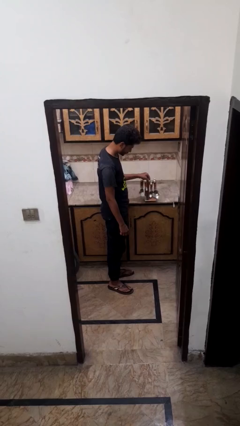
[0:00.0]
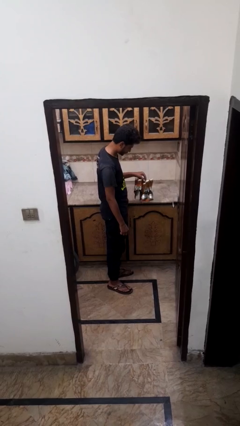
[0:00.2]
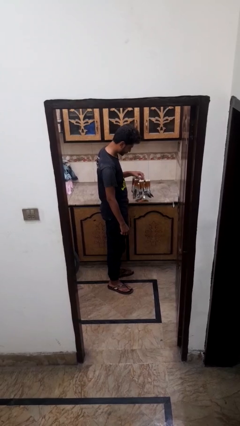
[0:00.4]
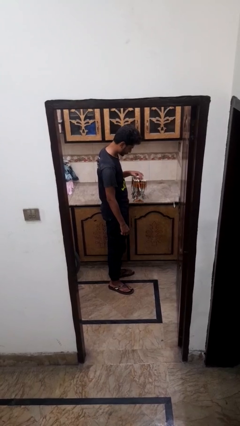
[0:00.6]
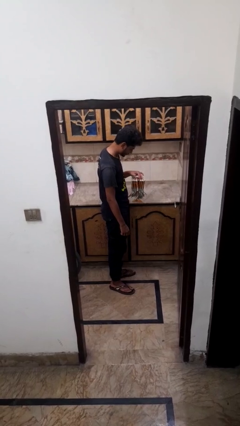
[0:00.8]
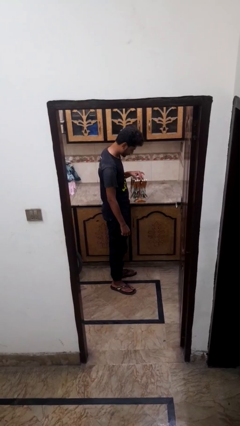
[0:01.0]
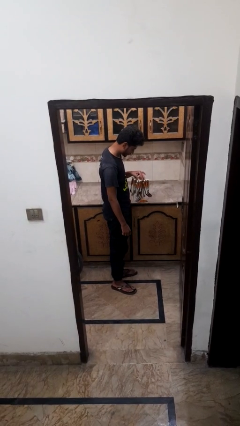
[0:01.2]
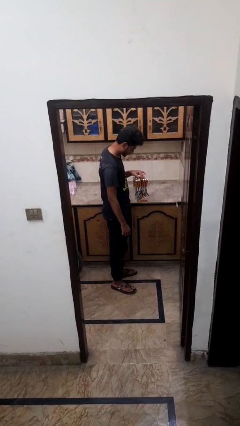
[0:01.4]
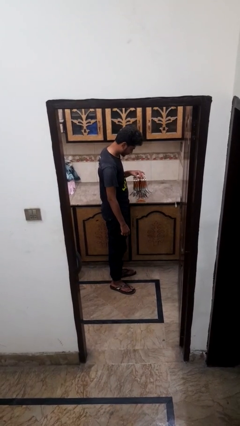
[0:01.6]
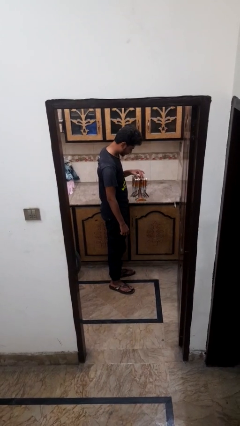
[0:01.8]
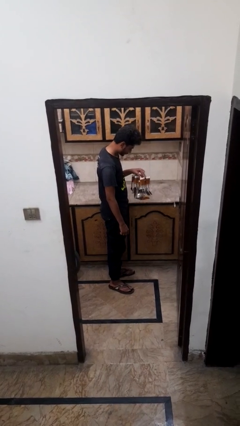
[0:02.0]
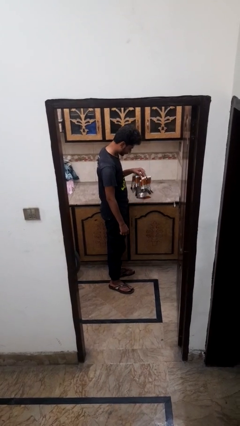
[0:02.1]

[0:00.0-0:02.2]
person picks up object from countertop

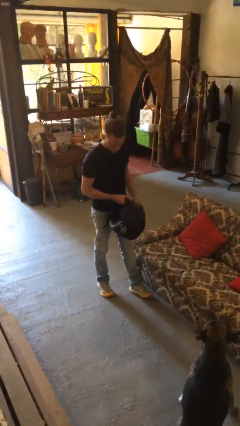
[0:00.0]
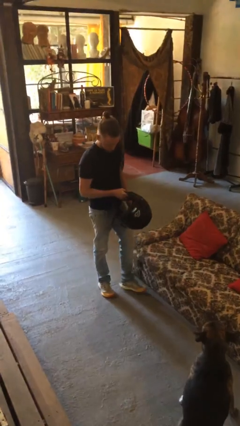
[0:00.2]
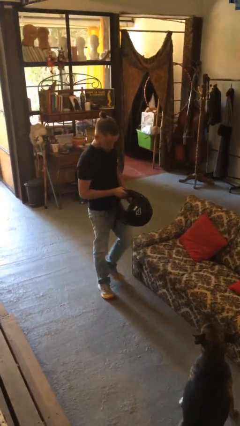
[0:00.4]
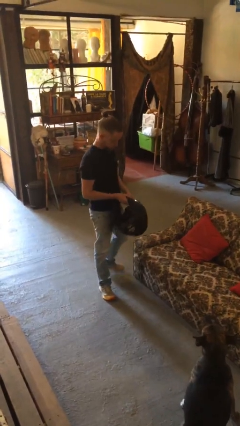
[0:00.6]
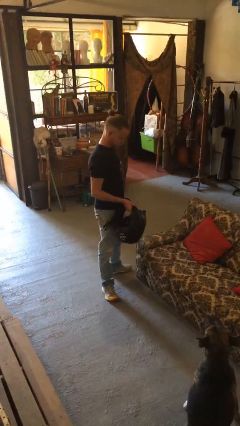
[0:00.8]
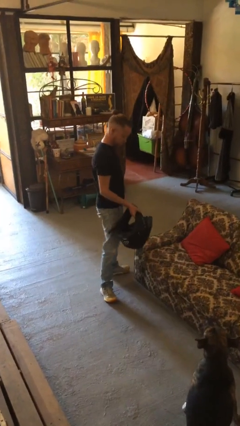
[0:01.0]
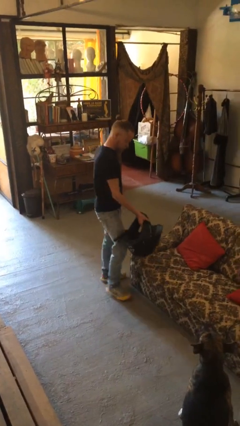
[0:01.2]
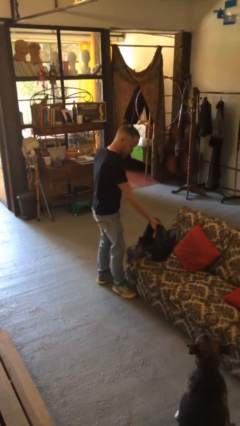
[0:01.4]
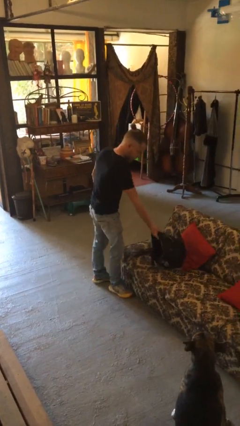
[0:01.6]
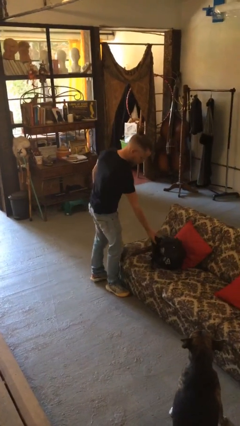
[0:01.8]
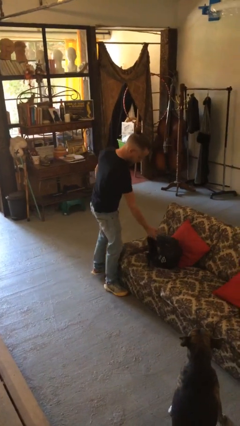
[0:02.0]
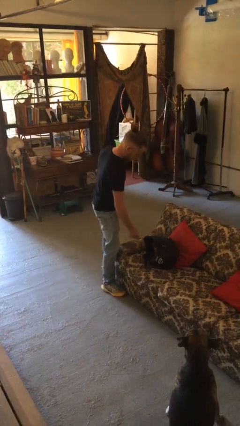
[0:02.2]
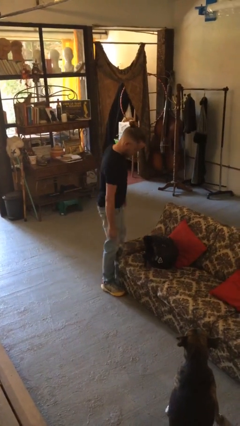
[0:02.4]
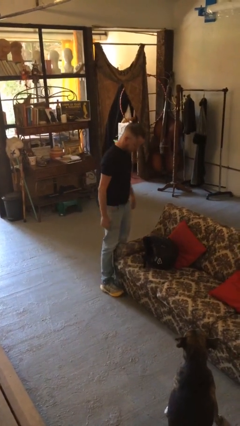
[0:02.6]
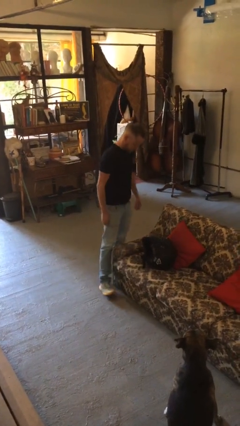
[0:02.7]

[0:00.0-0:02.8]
person puts down object on couch

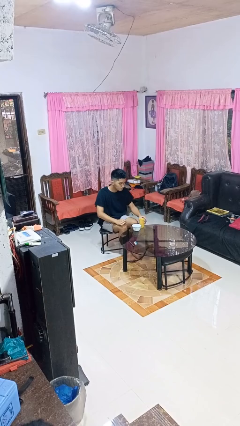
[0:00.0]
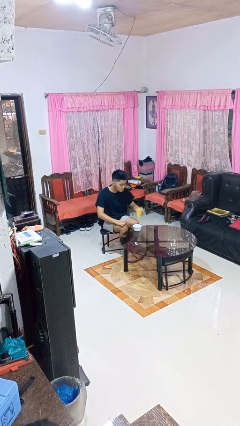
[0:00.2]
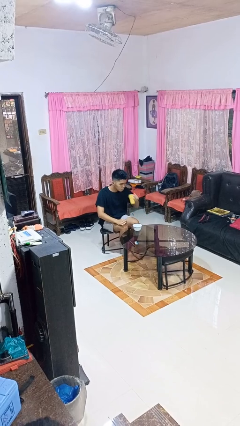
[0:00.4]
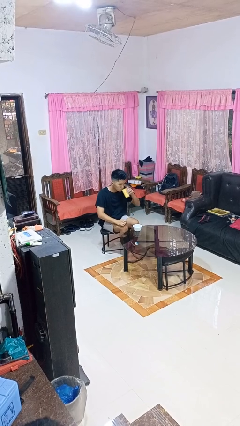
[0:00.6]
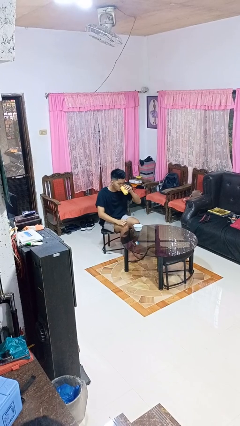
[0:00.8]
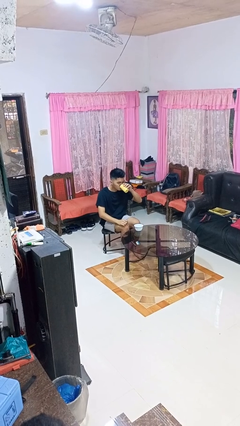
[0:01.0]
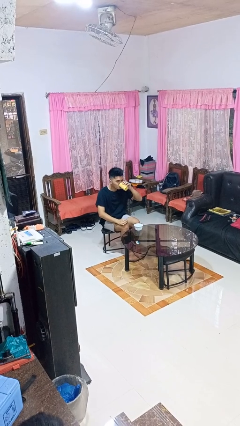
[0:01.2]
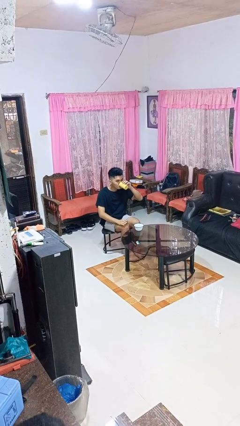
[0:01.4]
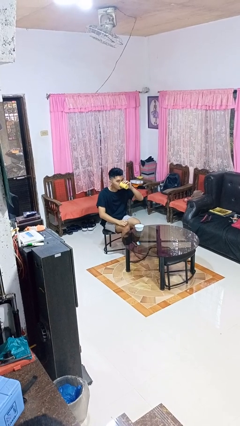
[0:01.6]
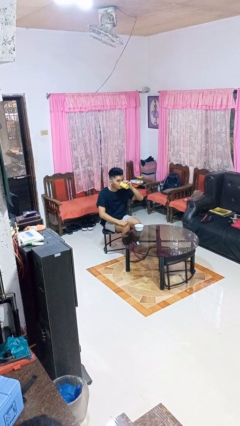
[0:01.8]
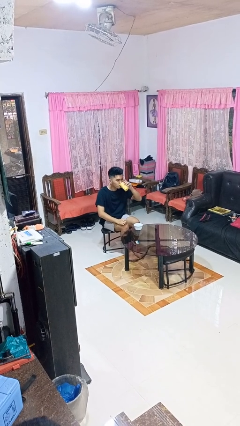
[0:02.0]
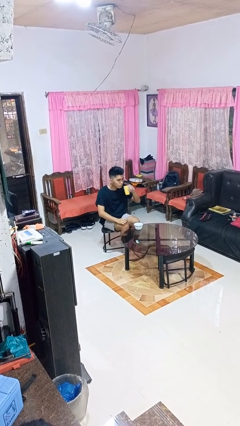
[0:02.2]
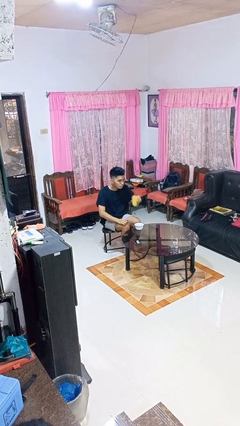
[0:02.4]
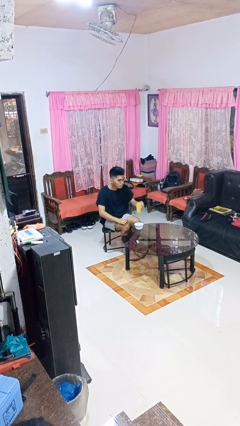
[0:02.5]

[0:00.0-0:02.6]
person drinks from cup

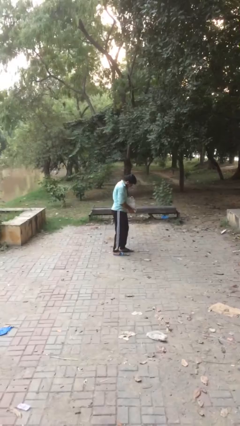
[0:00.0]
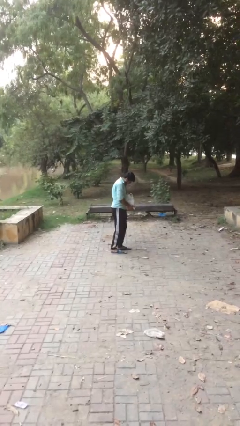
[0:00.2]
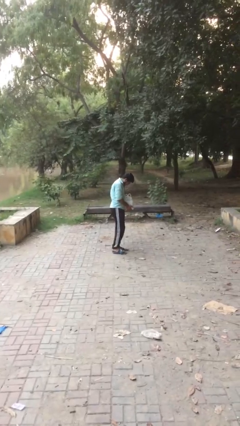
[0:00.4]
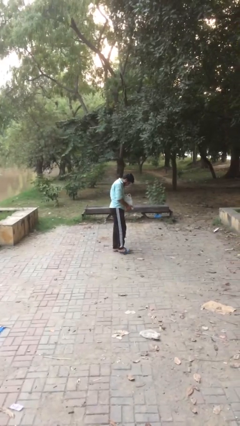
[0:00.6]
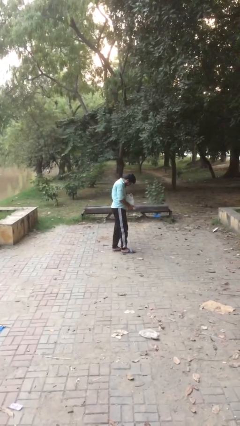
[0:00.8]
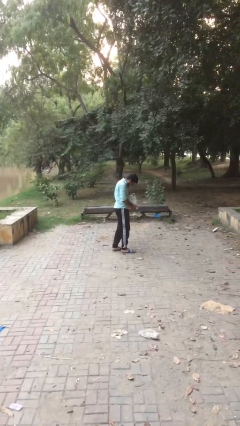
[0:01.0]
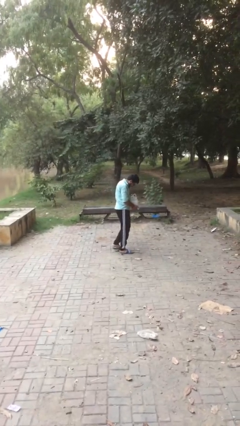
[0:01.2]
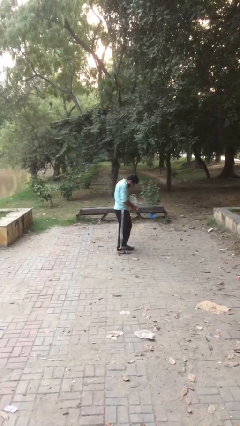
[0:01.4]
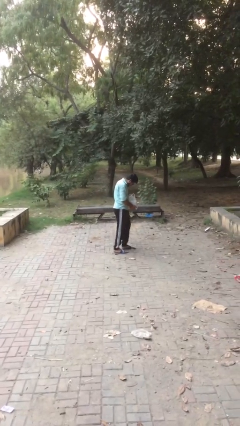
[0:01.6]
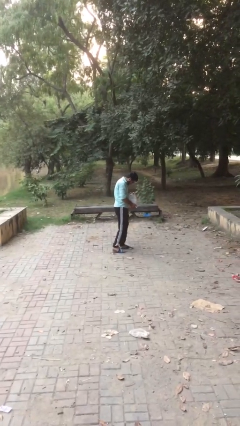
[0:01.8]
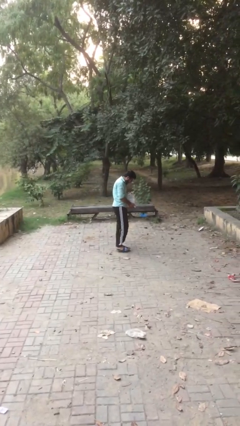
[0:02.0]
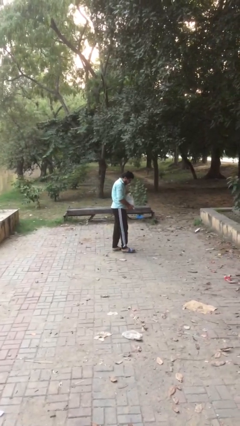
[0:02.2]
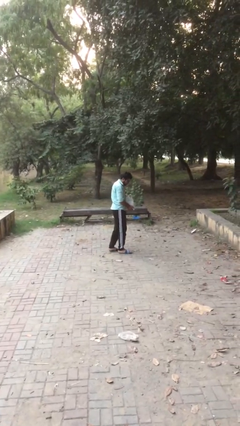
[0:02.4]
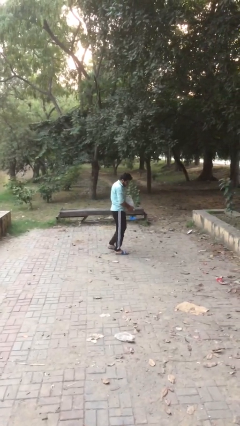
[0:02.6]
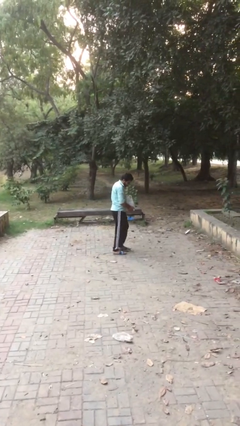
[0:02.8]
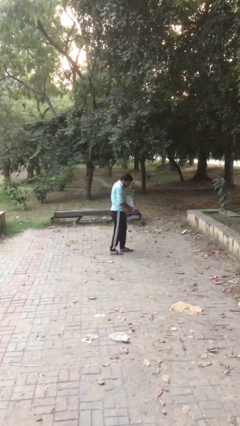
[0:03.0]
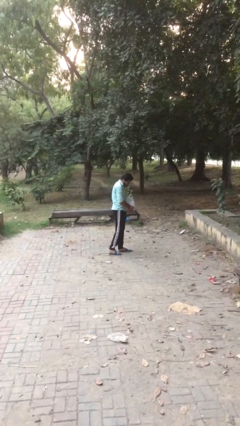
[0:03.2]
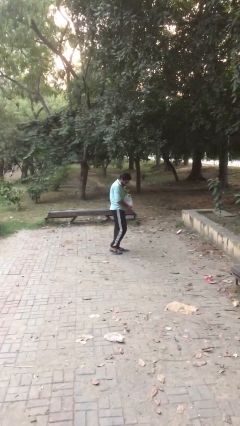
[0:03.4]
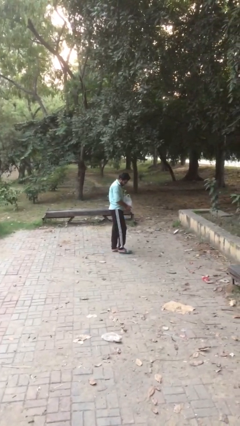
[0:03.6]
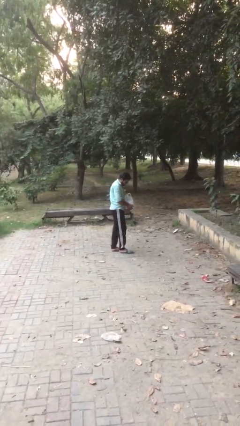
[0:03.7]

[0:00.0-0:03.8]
person carries heavy object

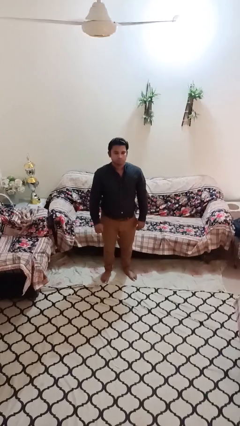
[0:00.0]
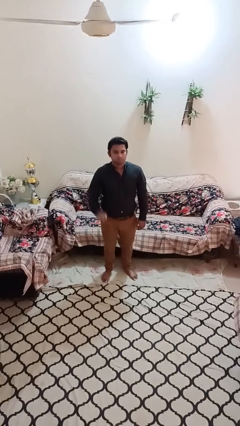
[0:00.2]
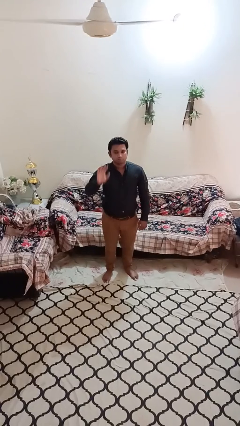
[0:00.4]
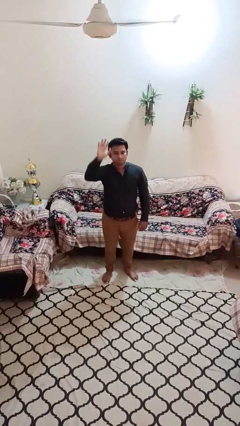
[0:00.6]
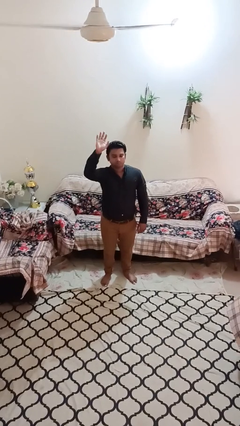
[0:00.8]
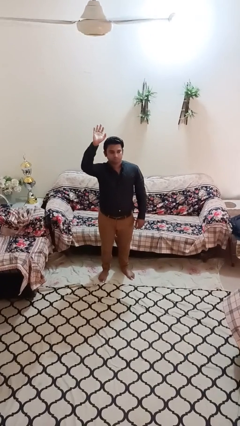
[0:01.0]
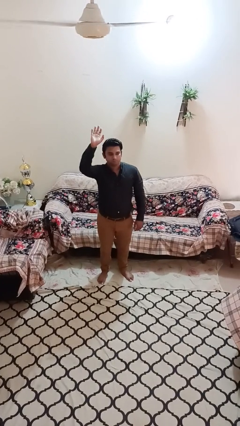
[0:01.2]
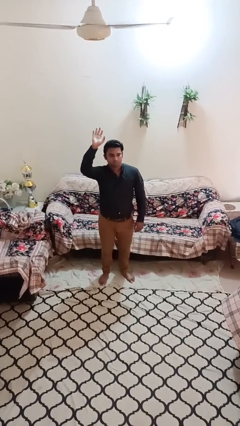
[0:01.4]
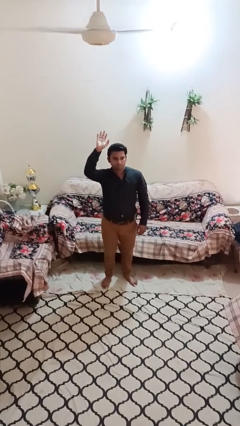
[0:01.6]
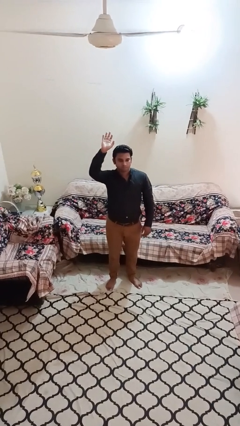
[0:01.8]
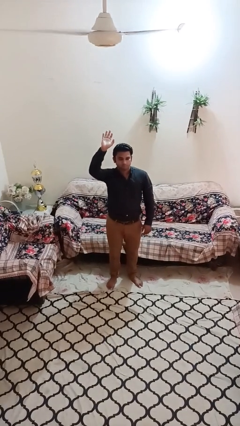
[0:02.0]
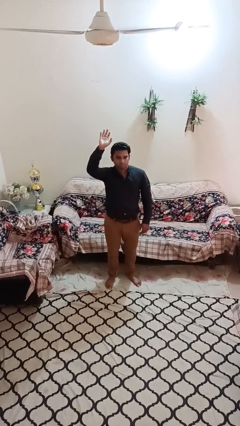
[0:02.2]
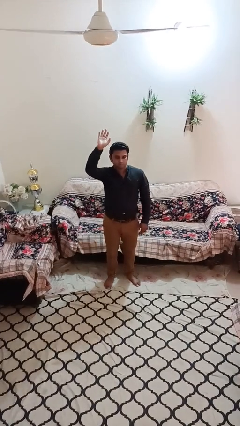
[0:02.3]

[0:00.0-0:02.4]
person gestures raise hand

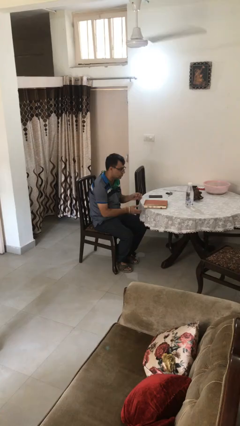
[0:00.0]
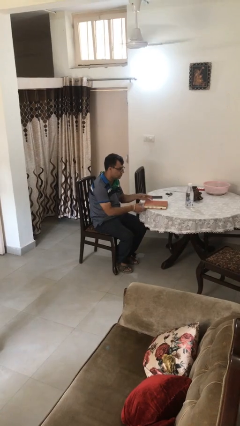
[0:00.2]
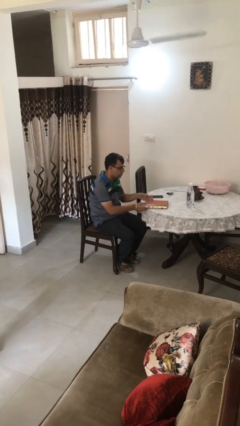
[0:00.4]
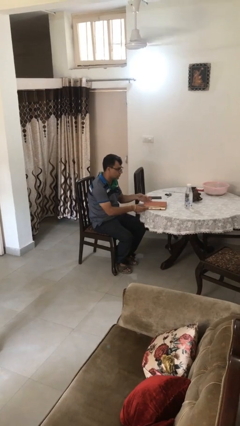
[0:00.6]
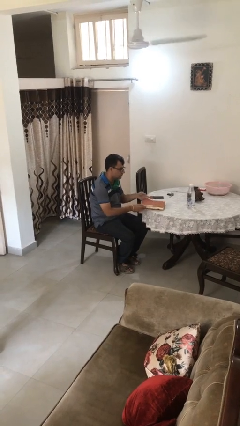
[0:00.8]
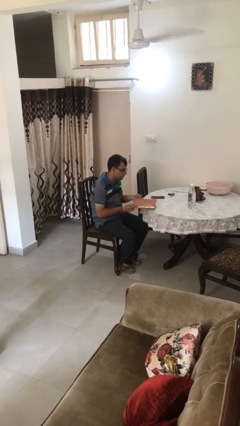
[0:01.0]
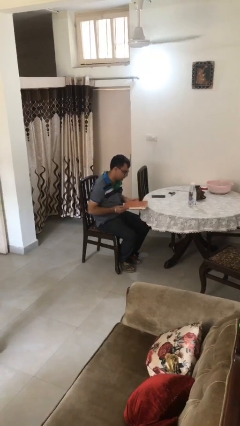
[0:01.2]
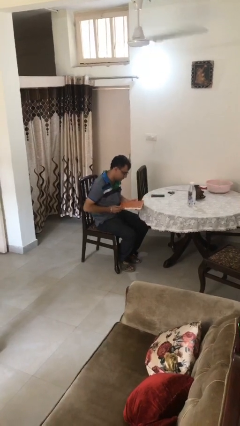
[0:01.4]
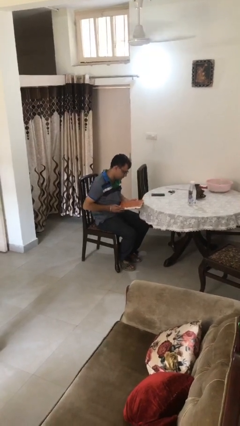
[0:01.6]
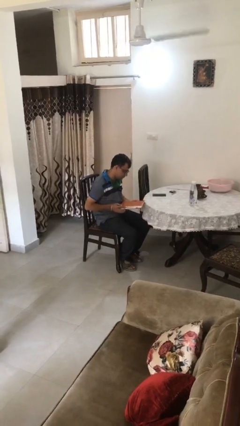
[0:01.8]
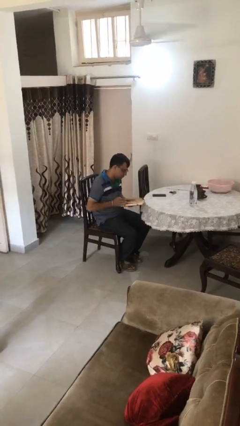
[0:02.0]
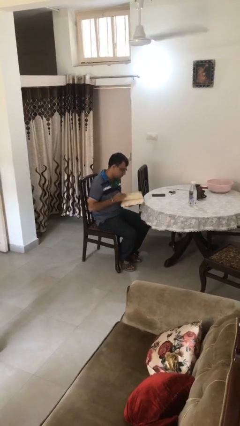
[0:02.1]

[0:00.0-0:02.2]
person picks up object from table

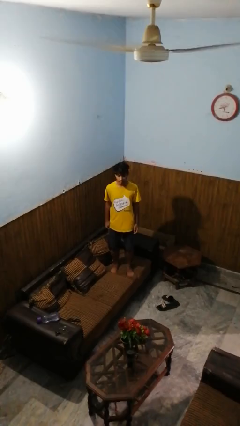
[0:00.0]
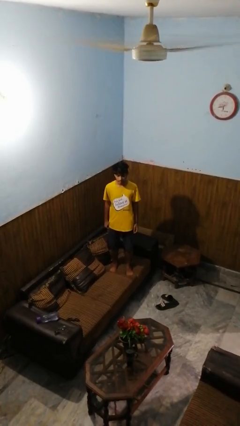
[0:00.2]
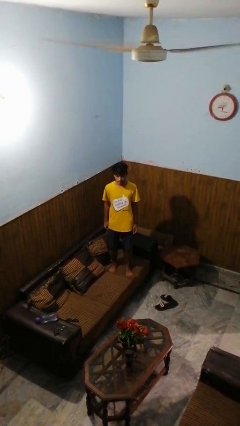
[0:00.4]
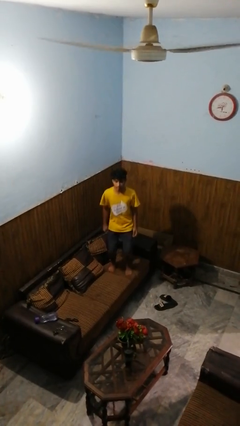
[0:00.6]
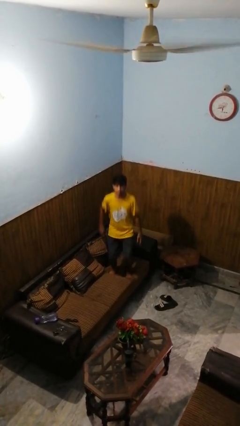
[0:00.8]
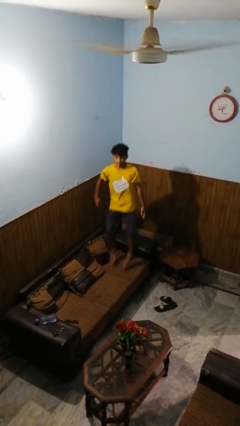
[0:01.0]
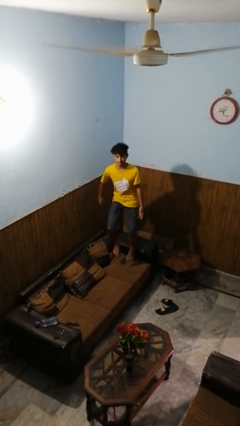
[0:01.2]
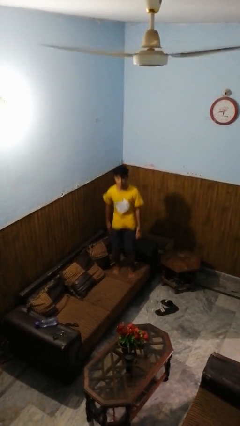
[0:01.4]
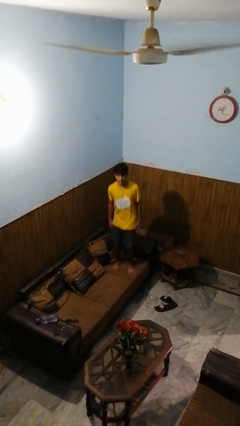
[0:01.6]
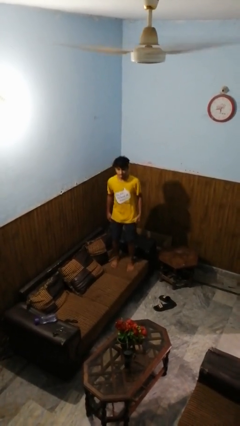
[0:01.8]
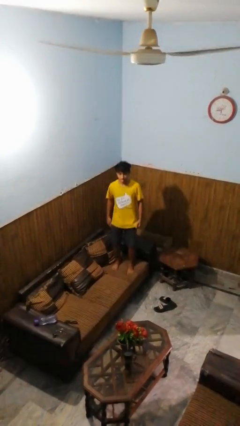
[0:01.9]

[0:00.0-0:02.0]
person jumps on couch
